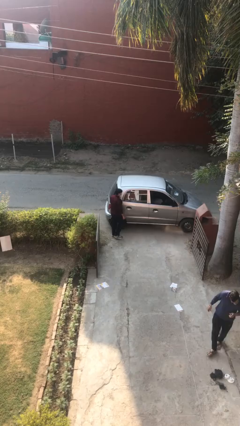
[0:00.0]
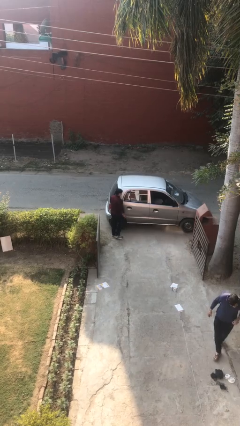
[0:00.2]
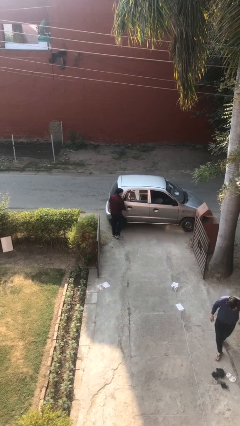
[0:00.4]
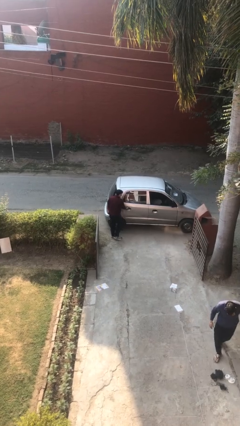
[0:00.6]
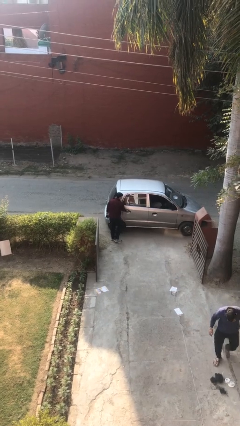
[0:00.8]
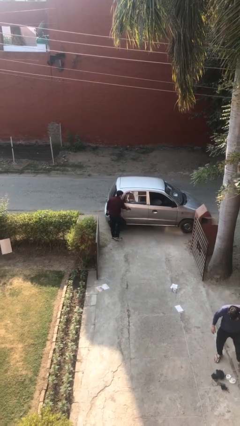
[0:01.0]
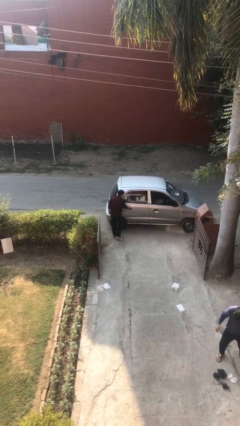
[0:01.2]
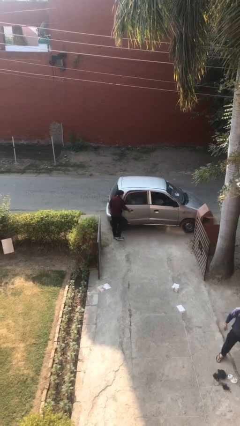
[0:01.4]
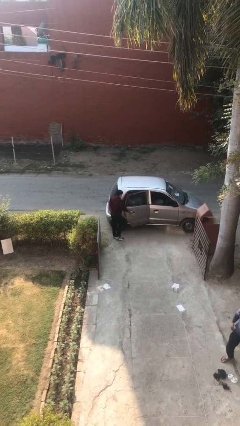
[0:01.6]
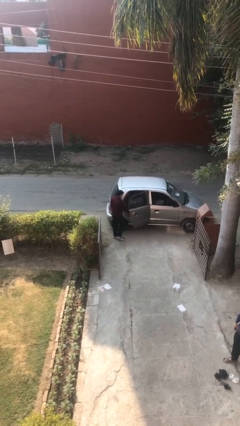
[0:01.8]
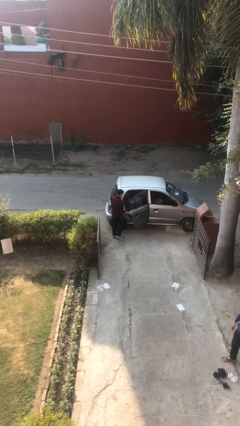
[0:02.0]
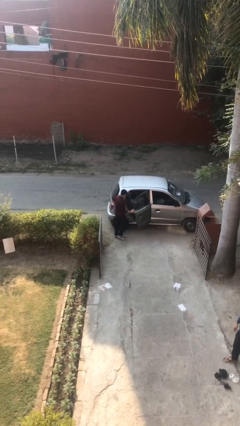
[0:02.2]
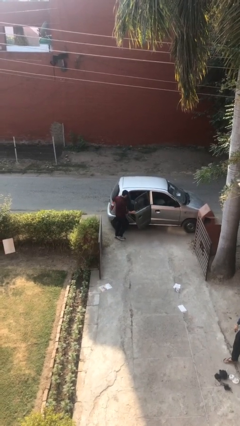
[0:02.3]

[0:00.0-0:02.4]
person opens car door

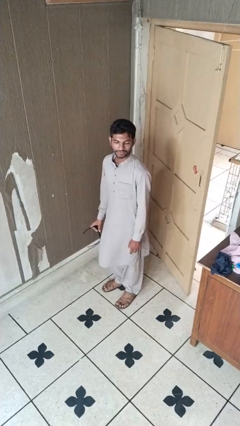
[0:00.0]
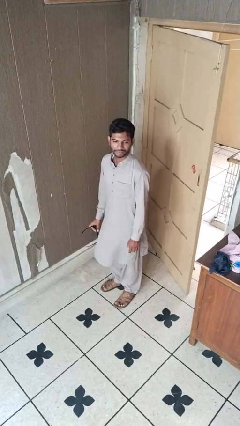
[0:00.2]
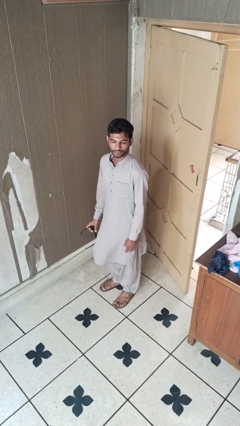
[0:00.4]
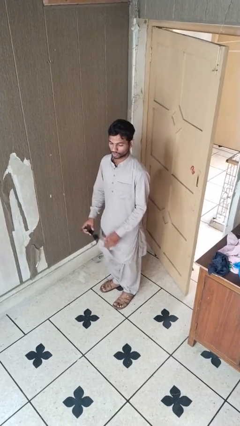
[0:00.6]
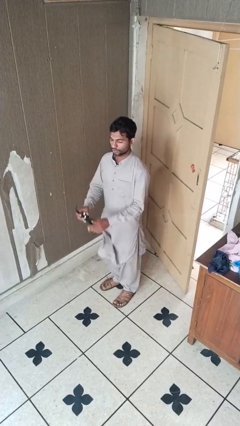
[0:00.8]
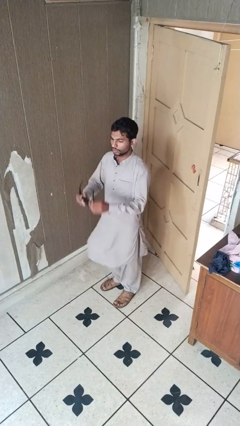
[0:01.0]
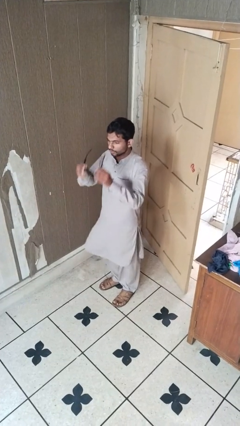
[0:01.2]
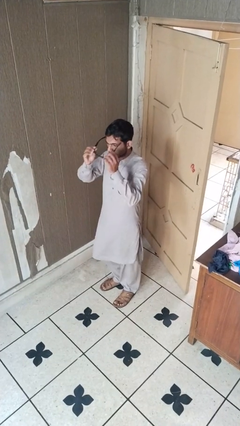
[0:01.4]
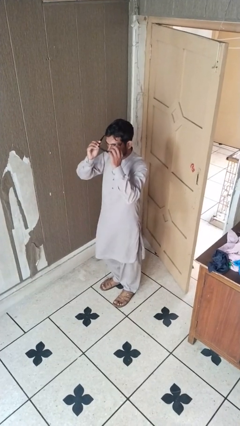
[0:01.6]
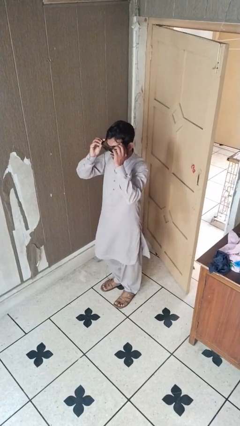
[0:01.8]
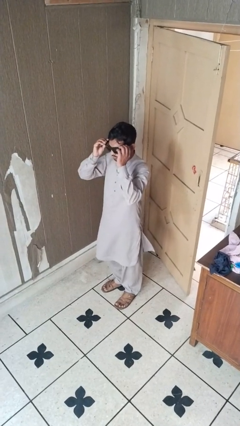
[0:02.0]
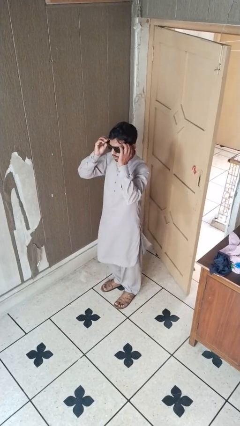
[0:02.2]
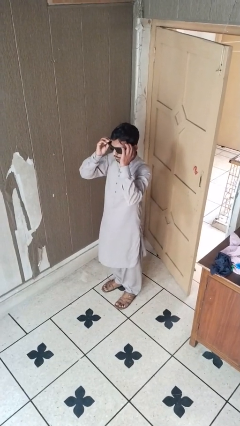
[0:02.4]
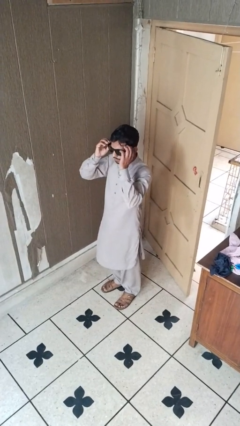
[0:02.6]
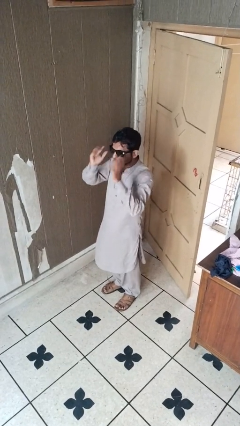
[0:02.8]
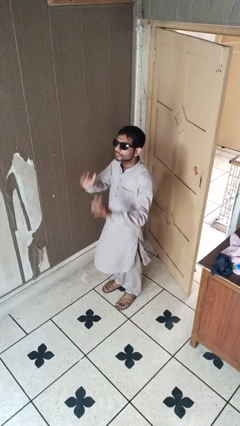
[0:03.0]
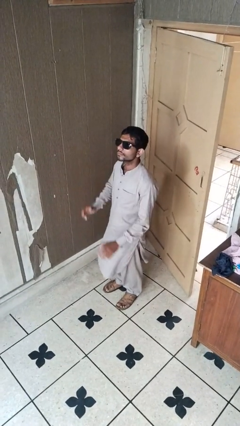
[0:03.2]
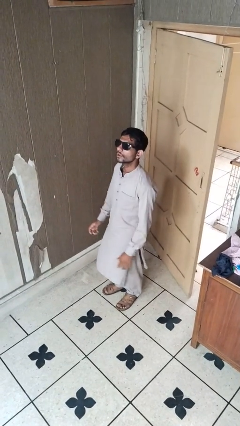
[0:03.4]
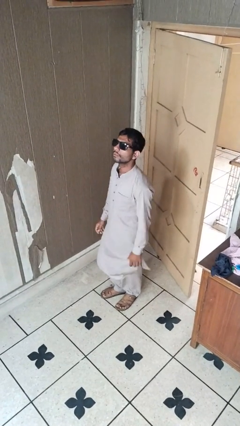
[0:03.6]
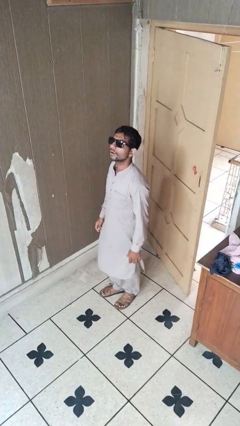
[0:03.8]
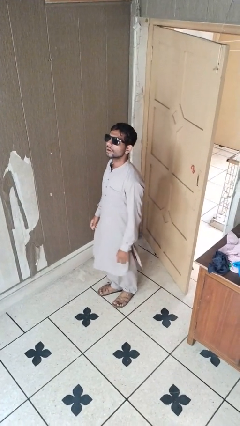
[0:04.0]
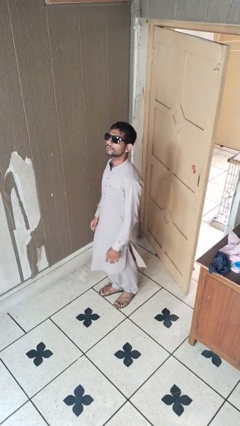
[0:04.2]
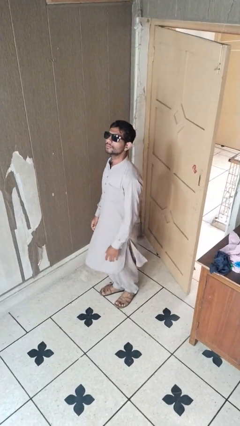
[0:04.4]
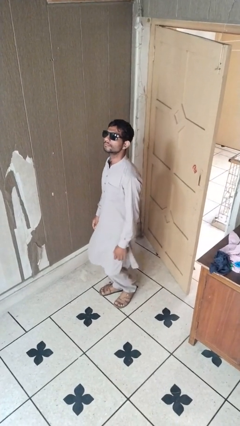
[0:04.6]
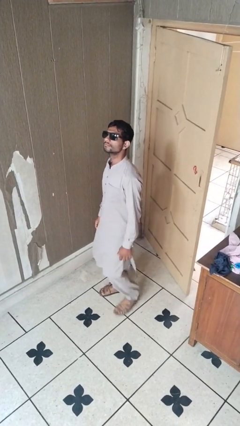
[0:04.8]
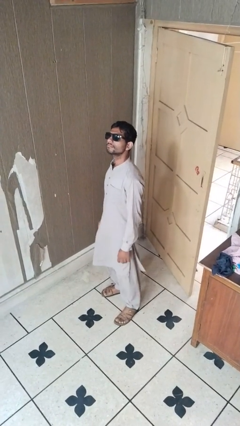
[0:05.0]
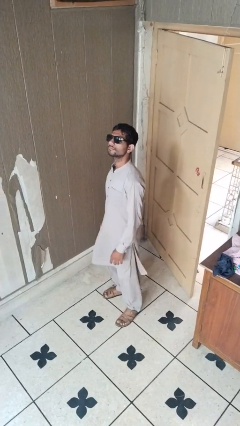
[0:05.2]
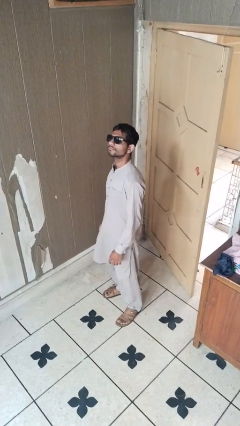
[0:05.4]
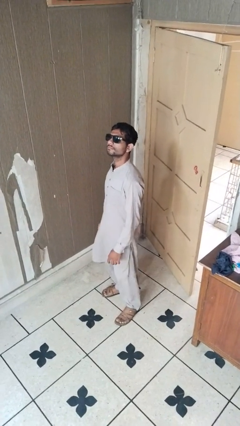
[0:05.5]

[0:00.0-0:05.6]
person puts on sunglasses

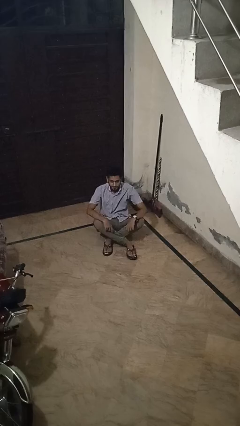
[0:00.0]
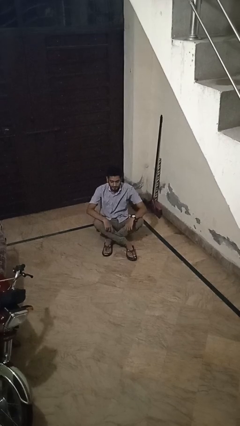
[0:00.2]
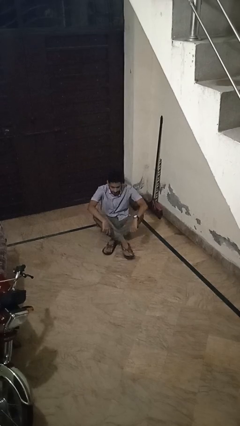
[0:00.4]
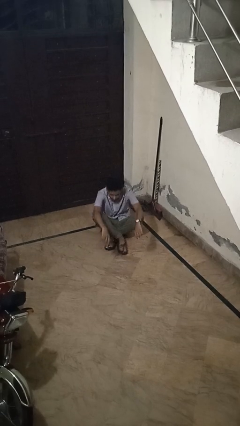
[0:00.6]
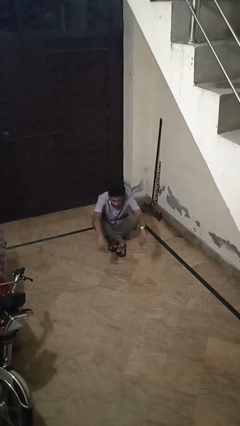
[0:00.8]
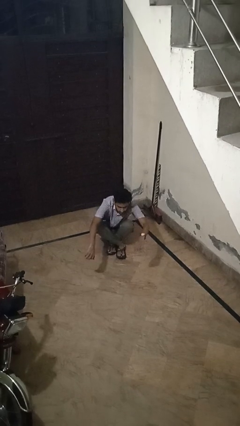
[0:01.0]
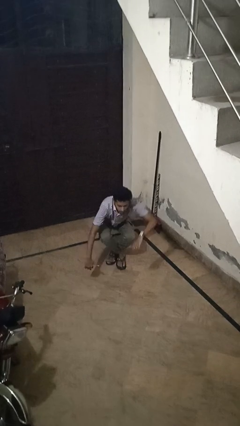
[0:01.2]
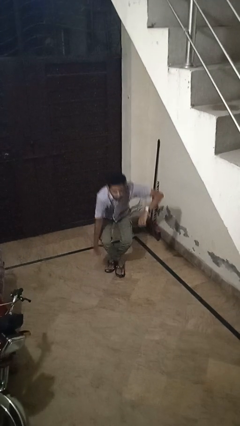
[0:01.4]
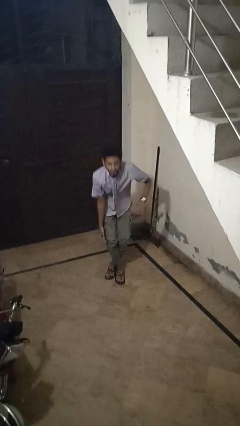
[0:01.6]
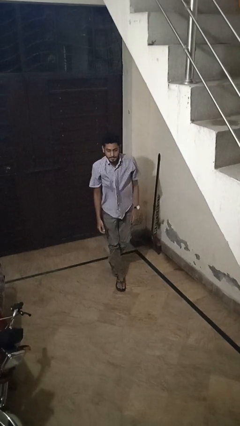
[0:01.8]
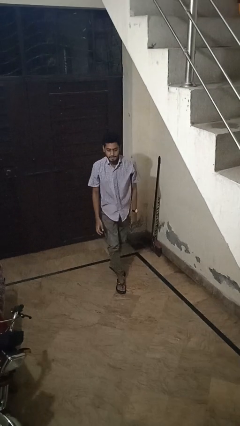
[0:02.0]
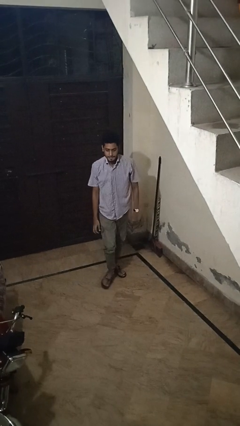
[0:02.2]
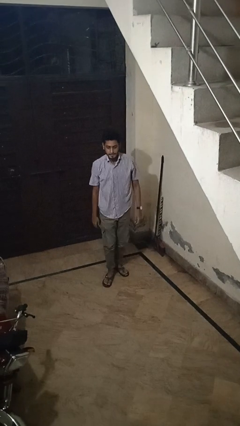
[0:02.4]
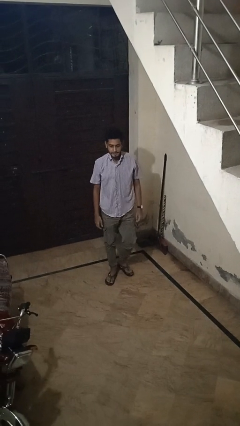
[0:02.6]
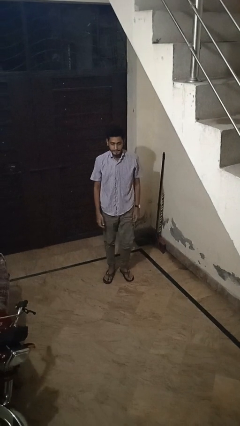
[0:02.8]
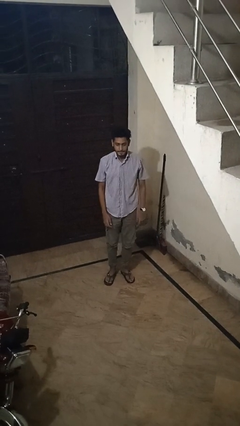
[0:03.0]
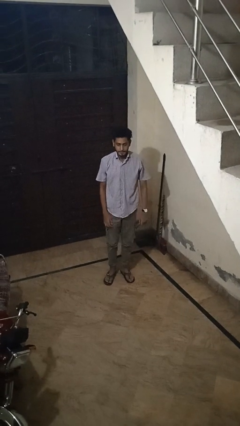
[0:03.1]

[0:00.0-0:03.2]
person stands up from floor

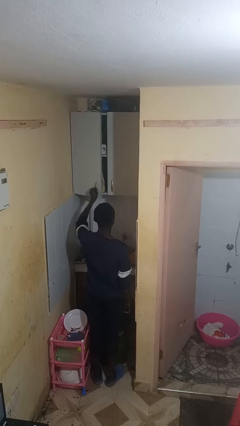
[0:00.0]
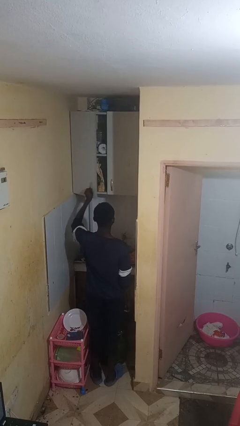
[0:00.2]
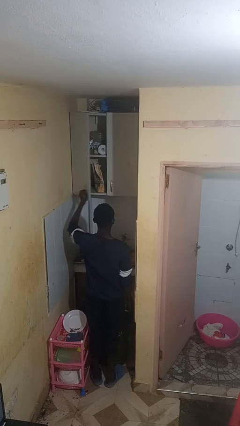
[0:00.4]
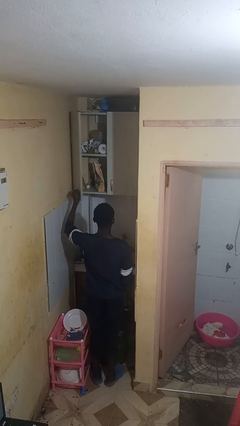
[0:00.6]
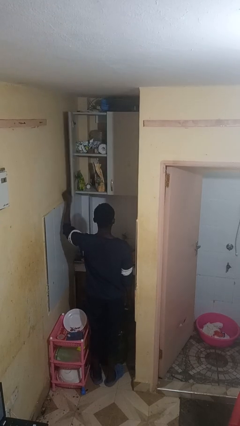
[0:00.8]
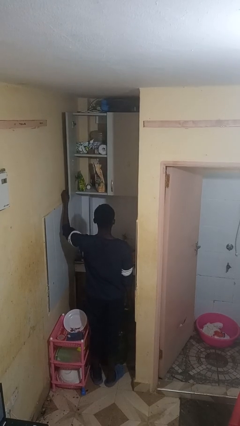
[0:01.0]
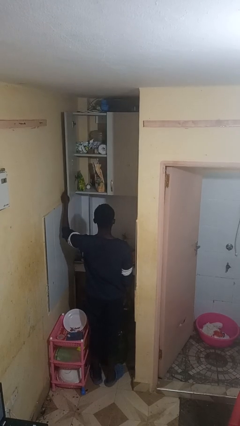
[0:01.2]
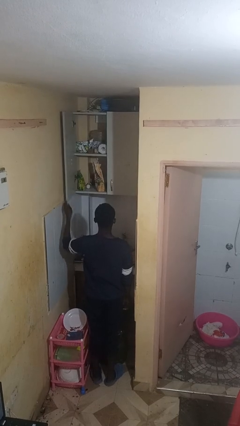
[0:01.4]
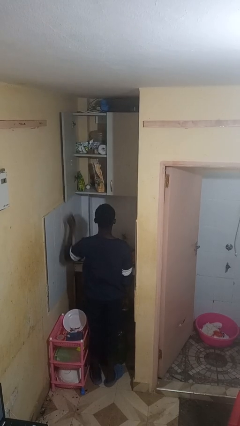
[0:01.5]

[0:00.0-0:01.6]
person opens cabinet

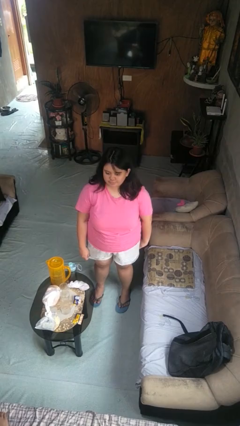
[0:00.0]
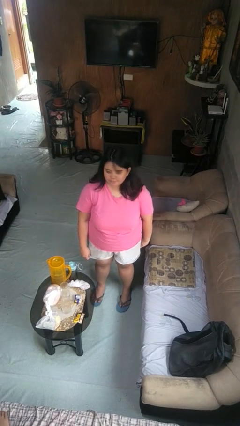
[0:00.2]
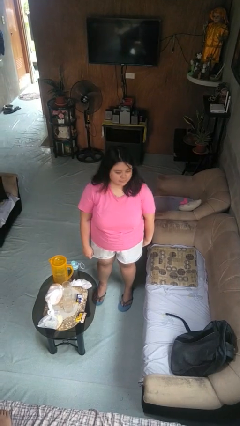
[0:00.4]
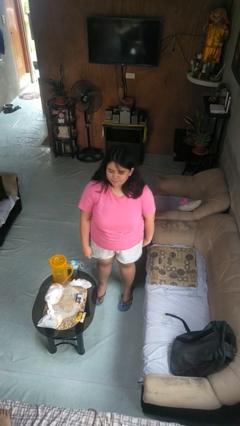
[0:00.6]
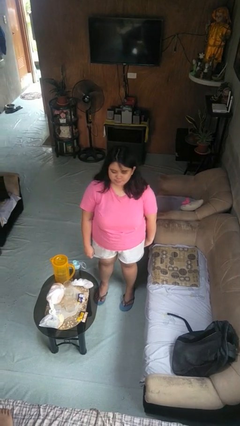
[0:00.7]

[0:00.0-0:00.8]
person shakes head

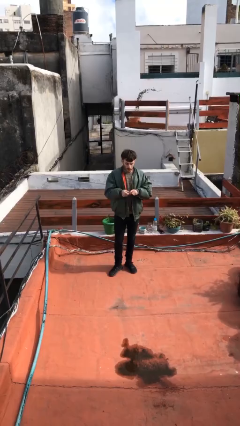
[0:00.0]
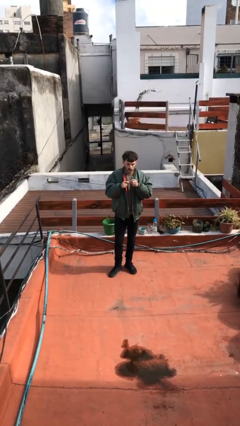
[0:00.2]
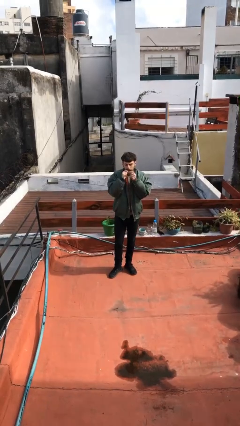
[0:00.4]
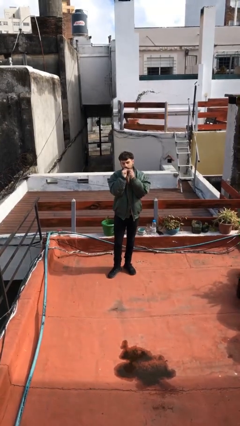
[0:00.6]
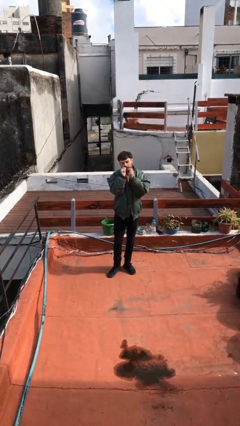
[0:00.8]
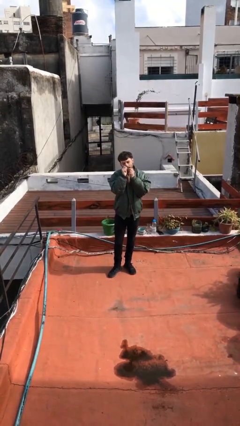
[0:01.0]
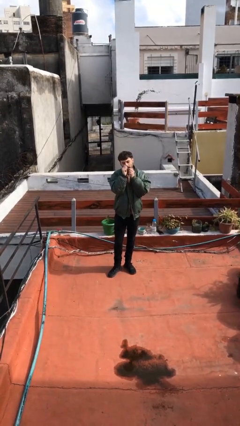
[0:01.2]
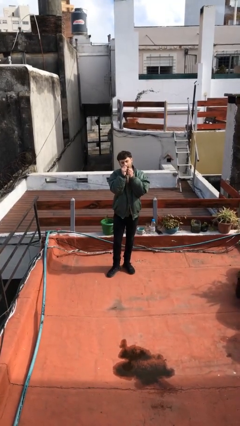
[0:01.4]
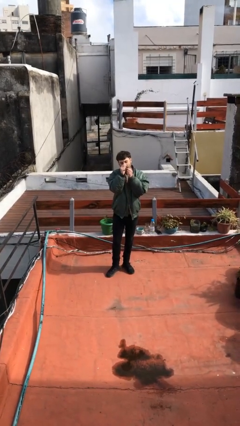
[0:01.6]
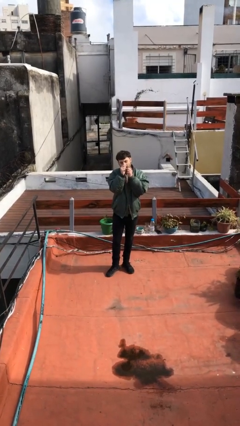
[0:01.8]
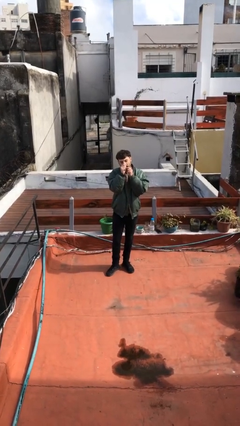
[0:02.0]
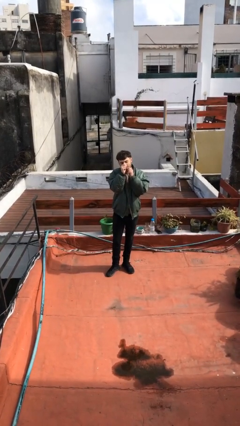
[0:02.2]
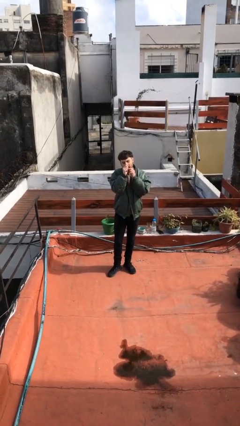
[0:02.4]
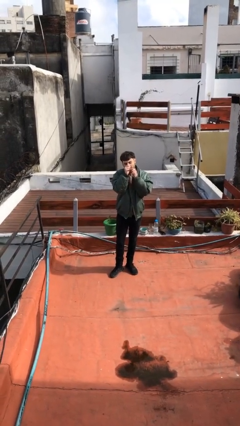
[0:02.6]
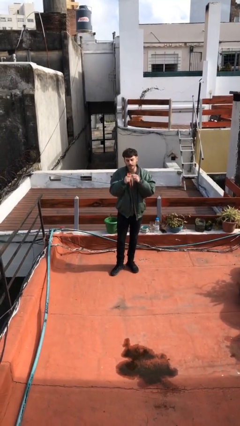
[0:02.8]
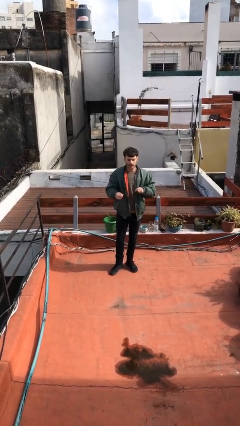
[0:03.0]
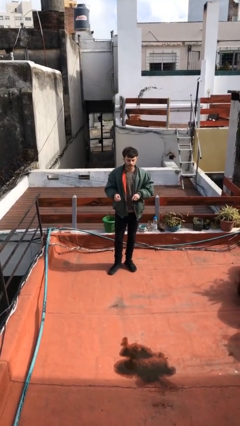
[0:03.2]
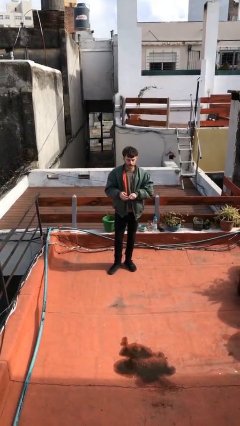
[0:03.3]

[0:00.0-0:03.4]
person flosses

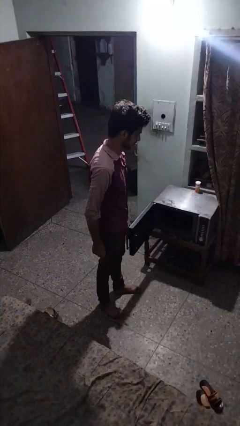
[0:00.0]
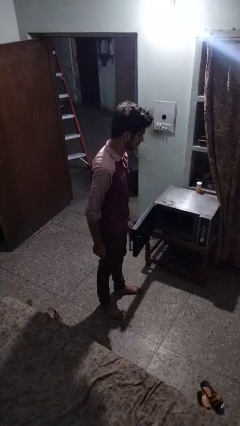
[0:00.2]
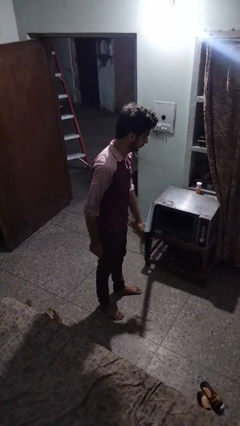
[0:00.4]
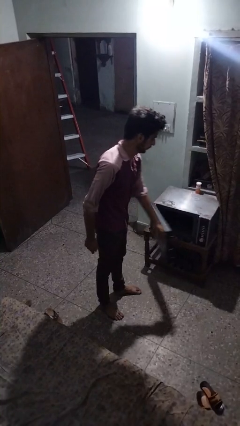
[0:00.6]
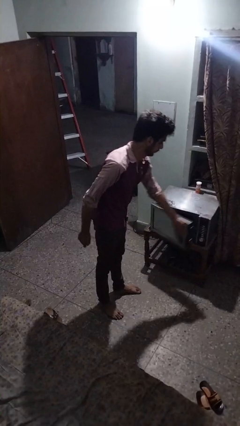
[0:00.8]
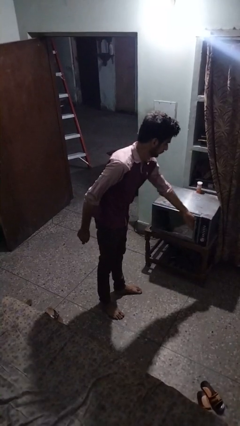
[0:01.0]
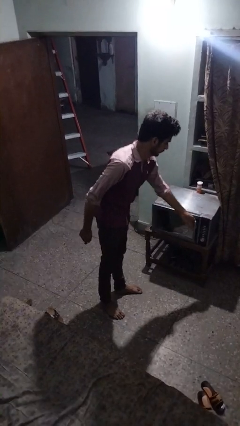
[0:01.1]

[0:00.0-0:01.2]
person closes microwave
